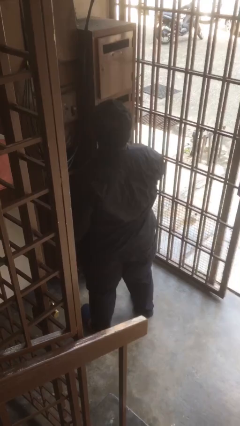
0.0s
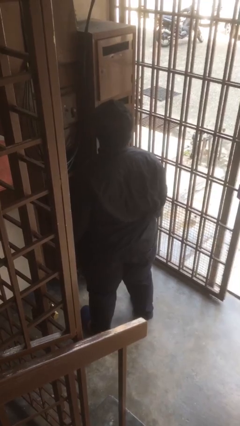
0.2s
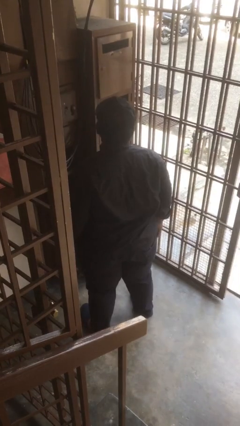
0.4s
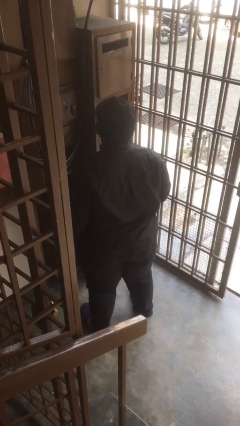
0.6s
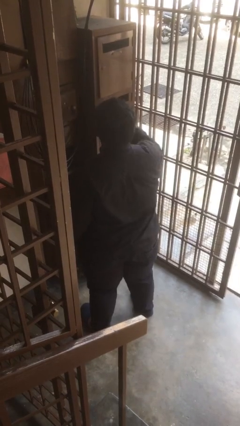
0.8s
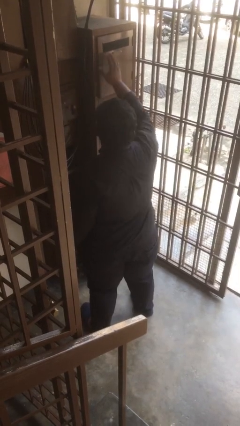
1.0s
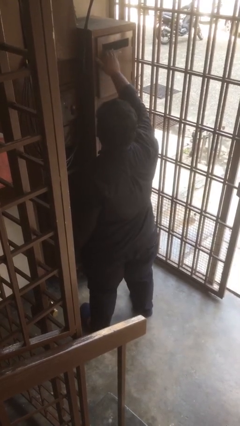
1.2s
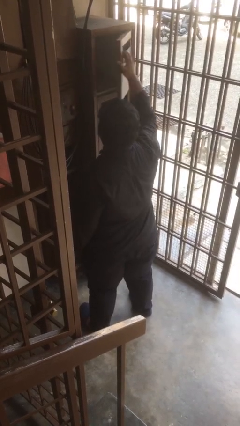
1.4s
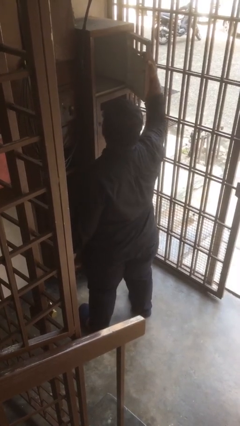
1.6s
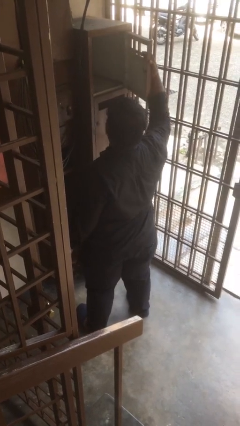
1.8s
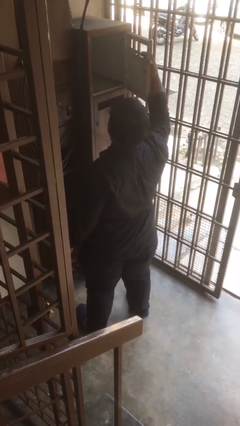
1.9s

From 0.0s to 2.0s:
person opens mailbox

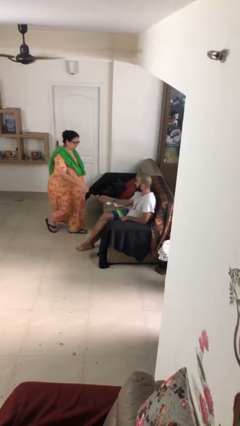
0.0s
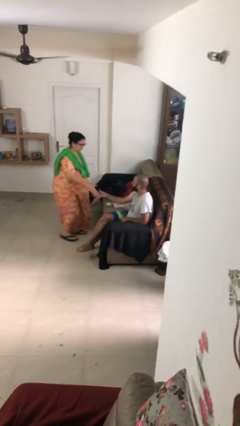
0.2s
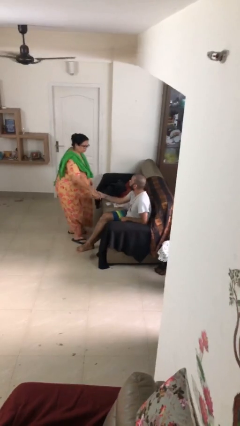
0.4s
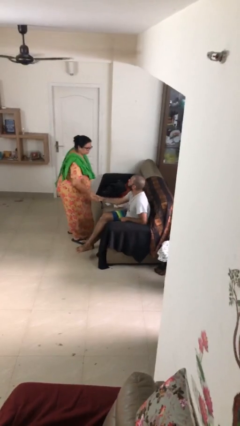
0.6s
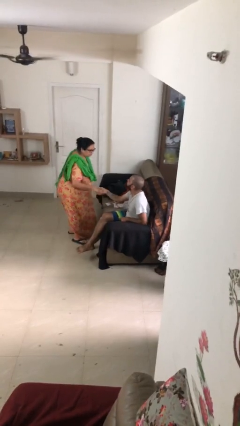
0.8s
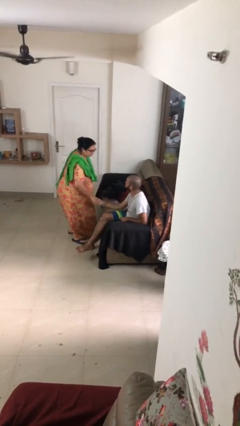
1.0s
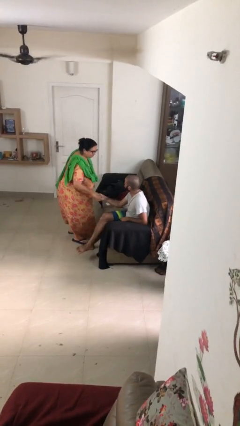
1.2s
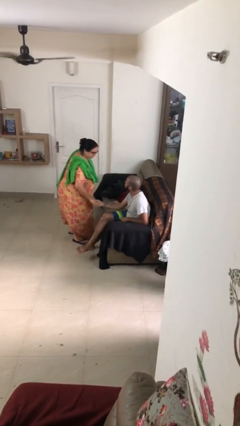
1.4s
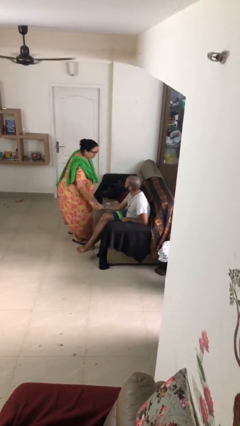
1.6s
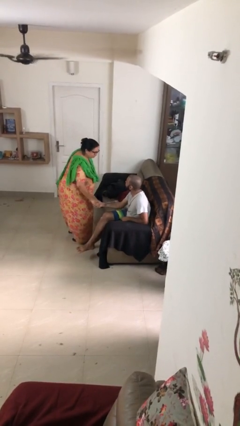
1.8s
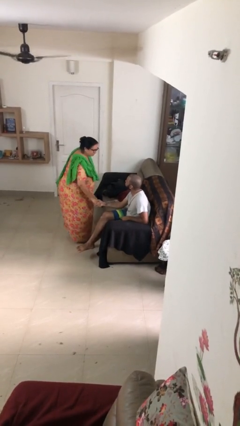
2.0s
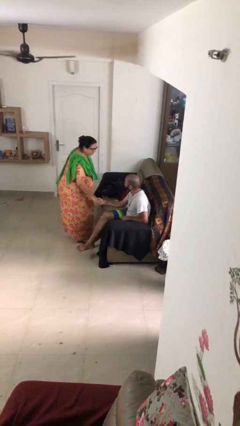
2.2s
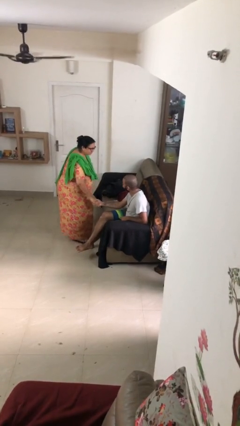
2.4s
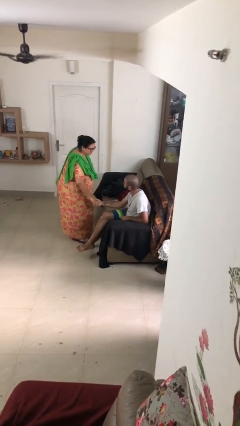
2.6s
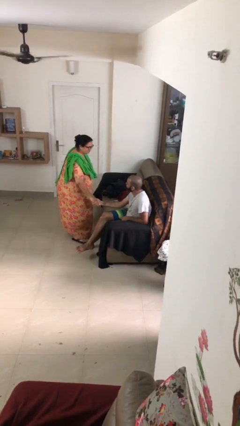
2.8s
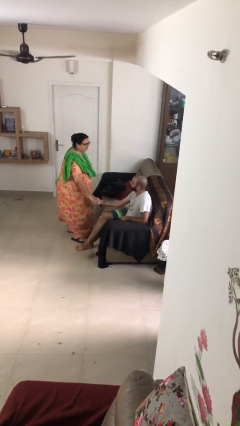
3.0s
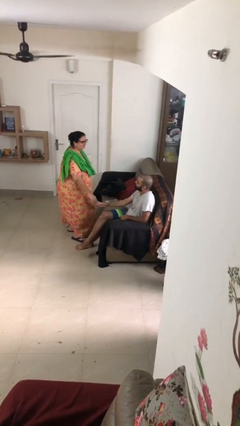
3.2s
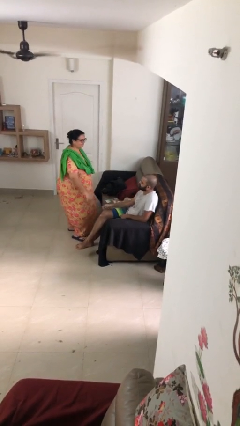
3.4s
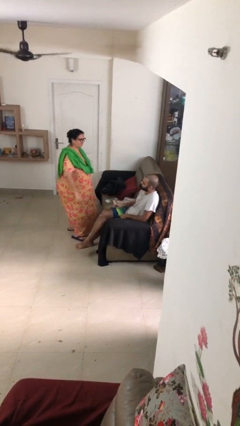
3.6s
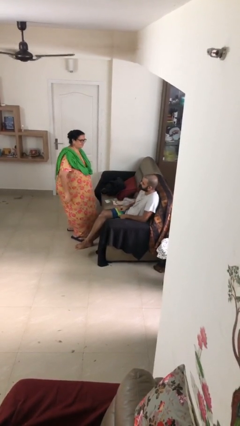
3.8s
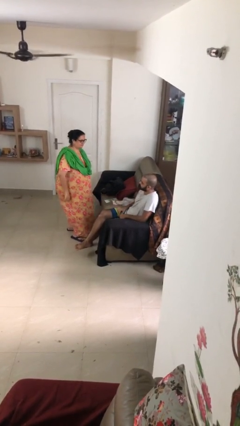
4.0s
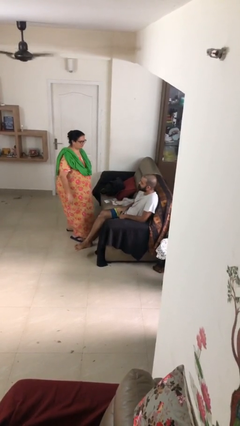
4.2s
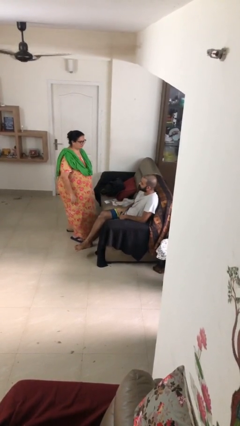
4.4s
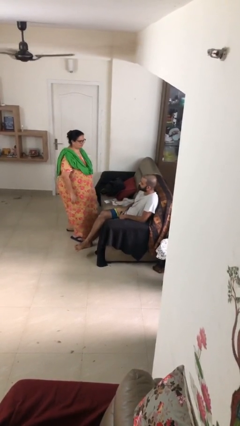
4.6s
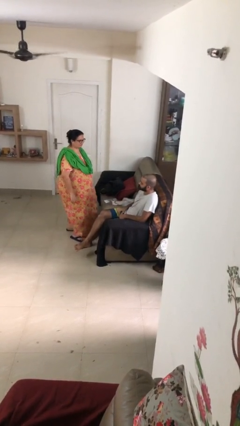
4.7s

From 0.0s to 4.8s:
person shakes hand

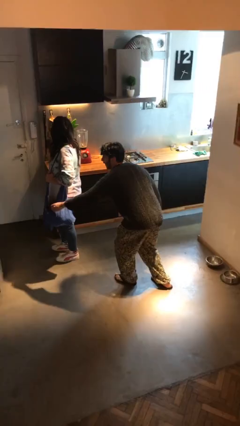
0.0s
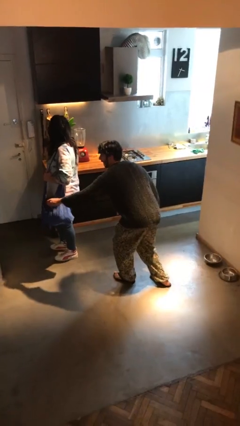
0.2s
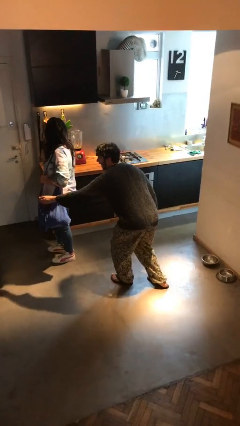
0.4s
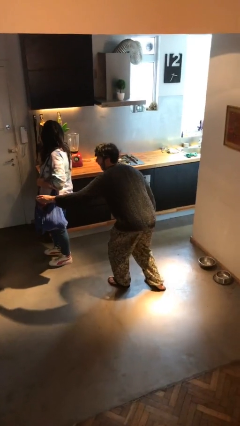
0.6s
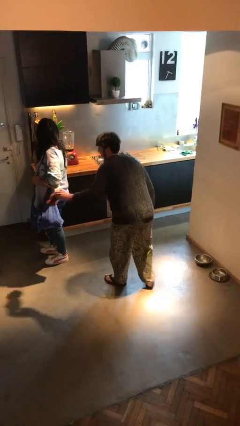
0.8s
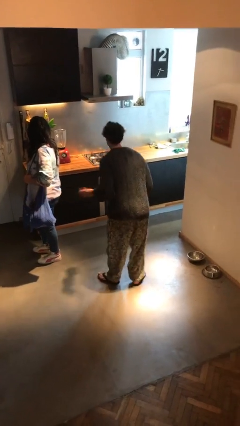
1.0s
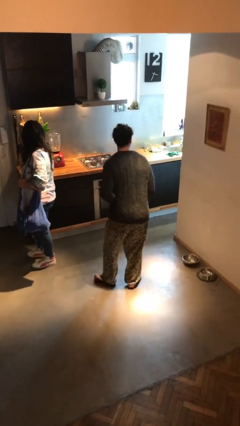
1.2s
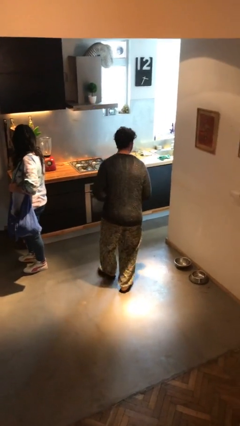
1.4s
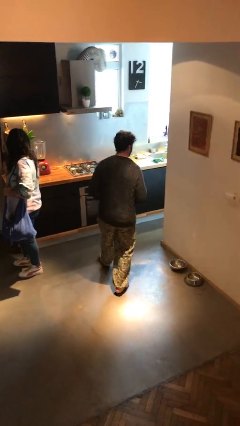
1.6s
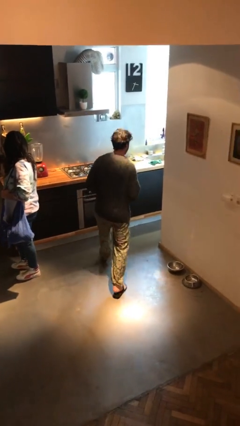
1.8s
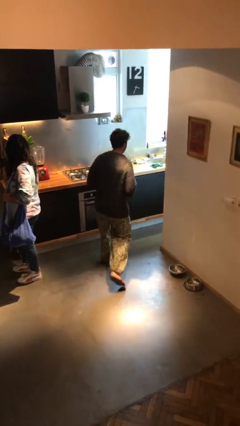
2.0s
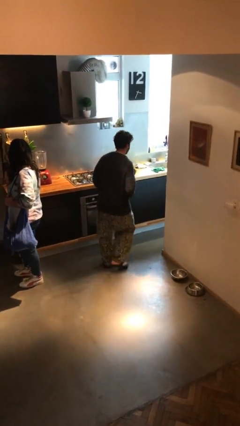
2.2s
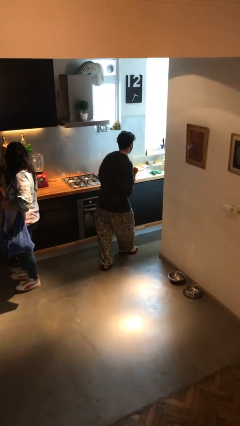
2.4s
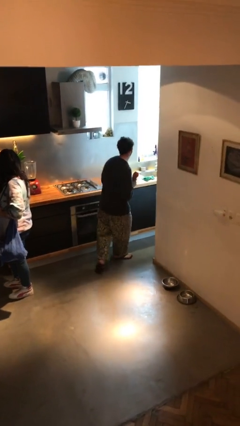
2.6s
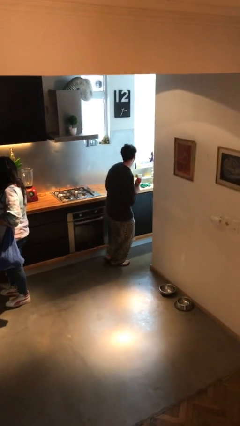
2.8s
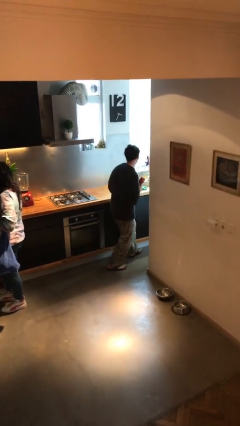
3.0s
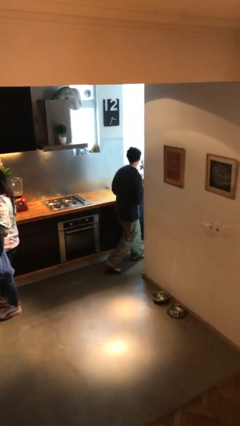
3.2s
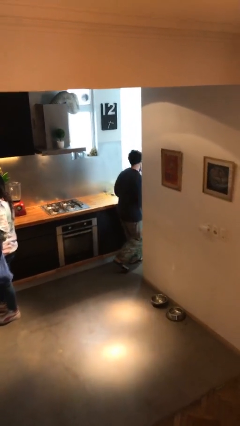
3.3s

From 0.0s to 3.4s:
person steals object from person

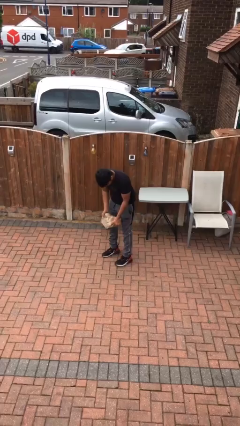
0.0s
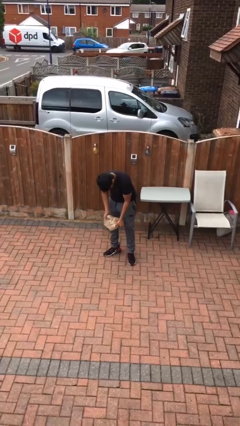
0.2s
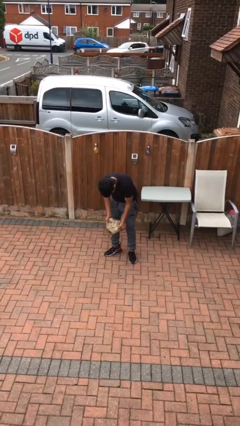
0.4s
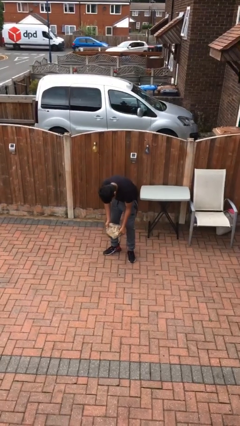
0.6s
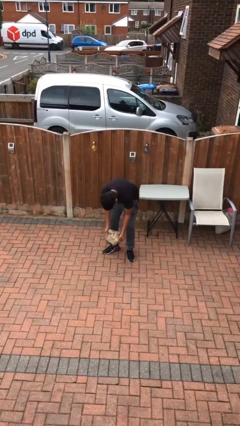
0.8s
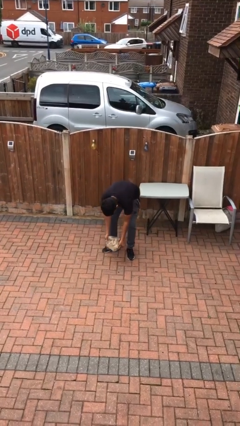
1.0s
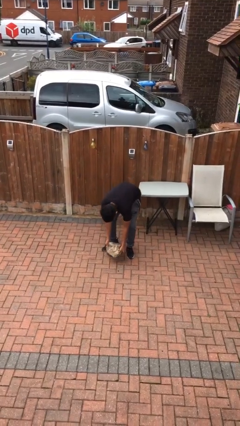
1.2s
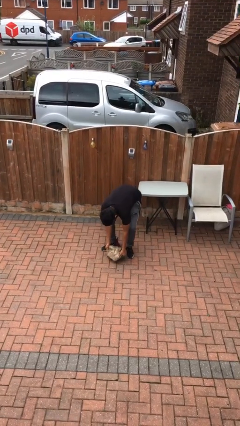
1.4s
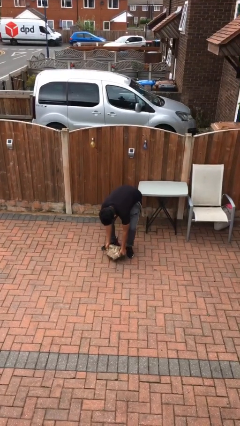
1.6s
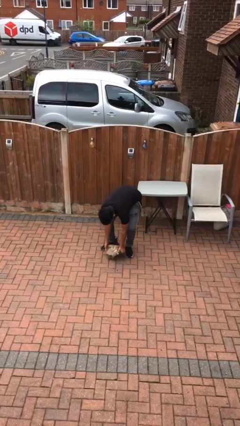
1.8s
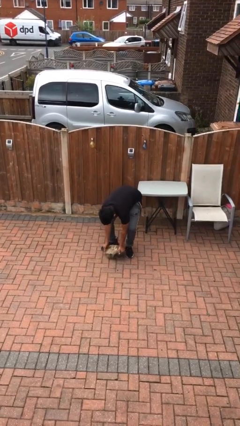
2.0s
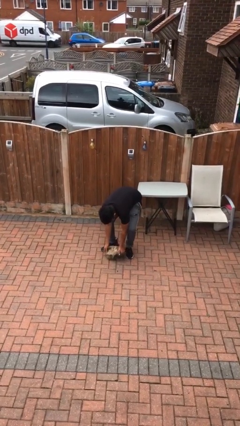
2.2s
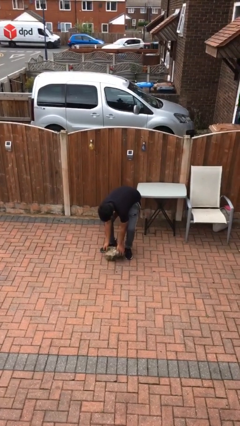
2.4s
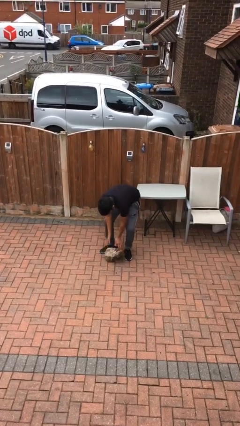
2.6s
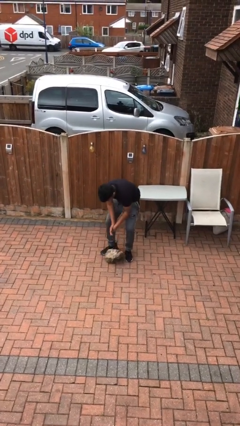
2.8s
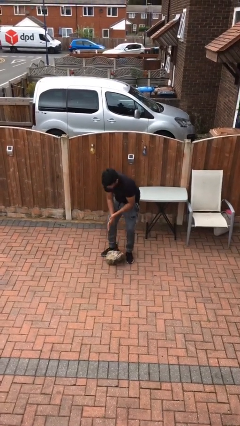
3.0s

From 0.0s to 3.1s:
person puts down object on floor

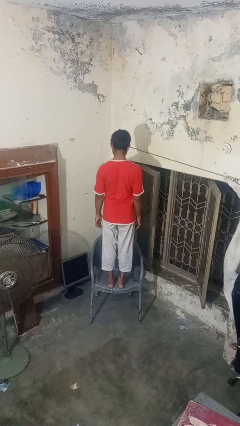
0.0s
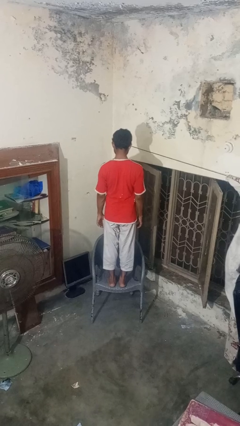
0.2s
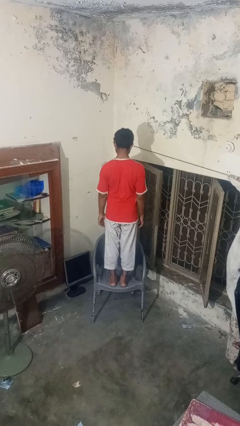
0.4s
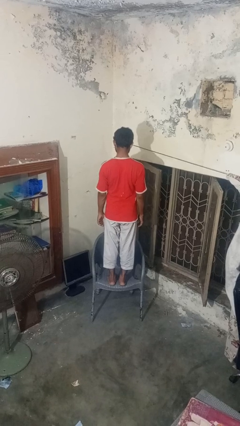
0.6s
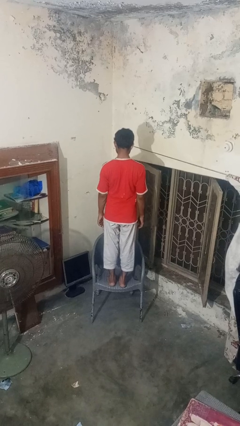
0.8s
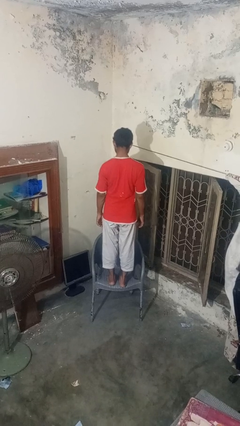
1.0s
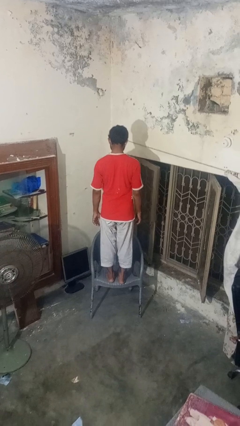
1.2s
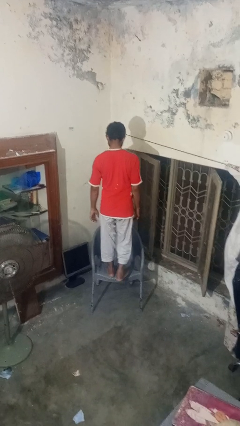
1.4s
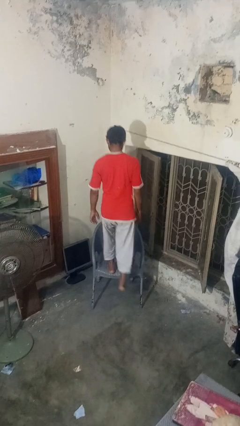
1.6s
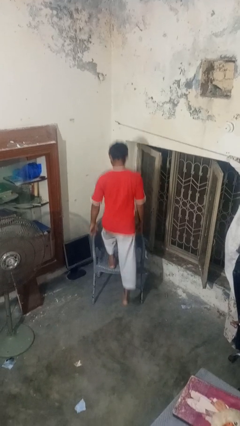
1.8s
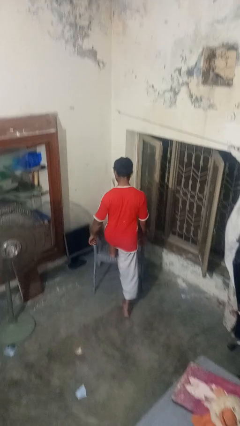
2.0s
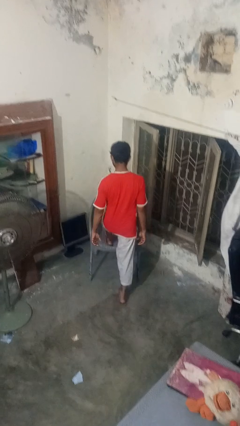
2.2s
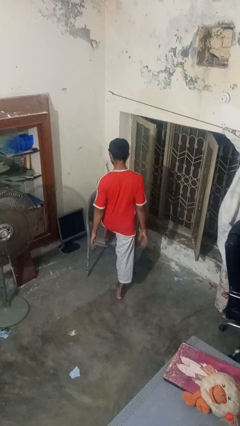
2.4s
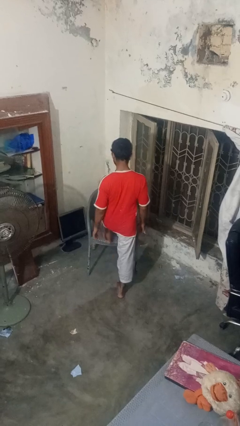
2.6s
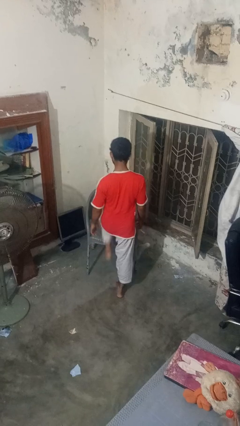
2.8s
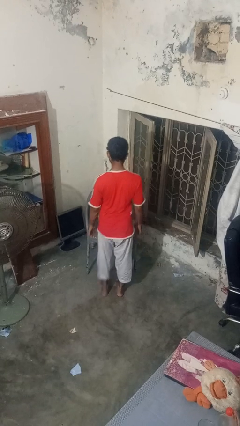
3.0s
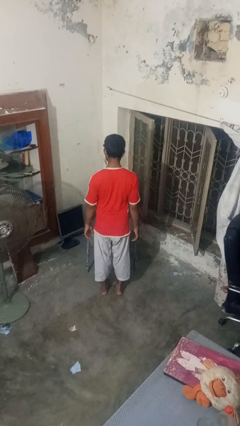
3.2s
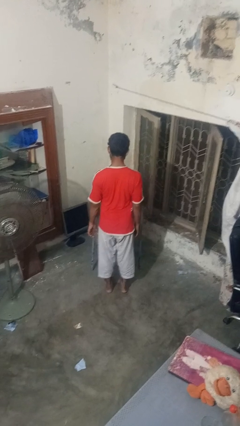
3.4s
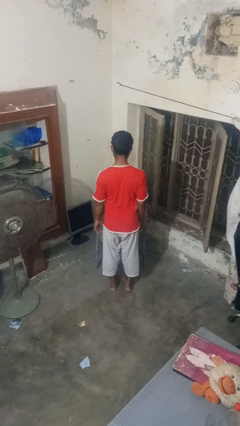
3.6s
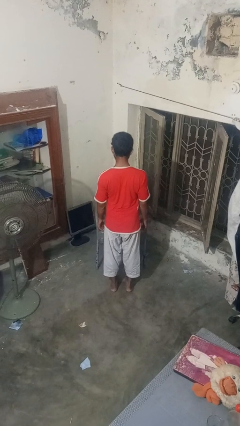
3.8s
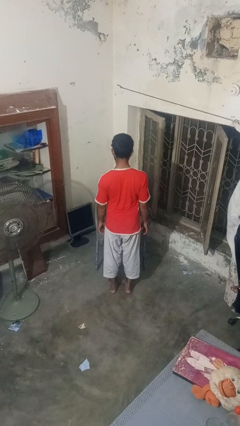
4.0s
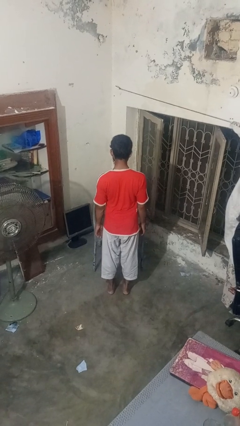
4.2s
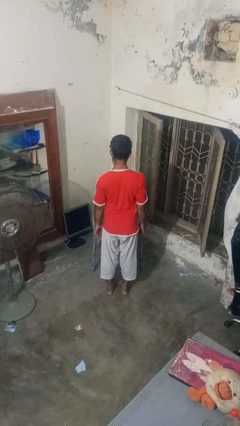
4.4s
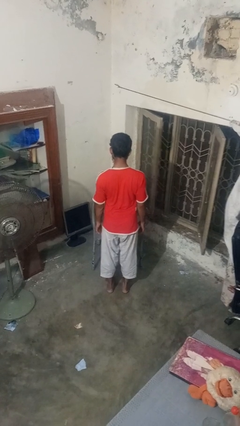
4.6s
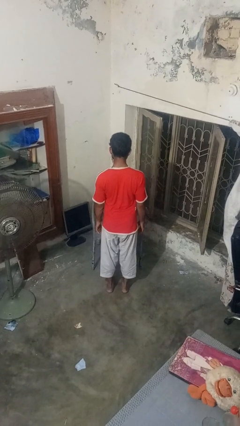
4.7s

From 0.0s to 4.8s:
person climbs off chair
